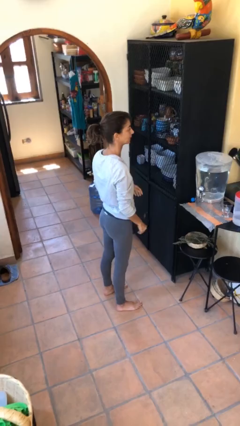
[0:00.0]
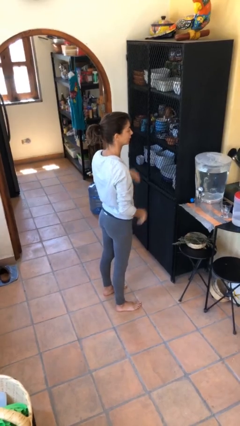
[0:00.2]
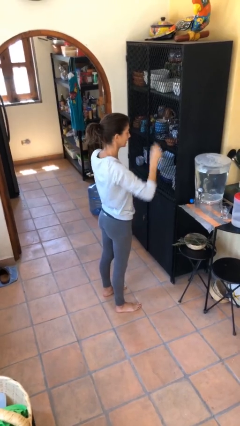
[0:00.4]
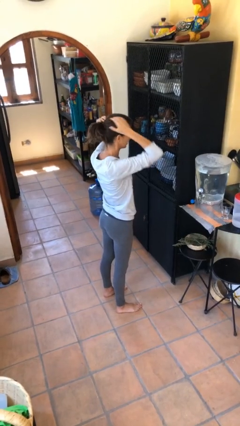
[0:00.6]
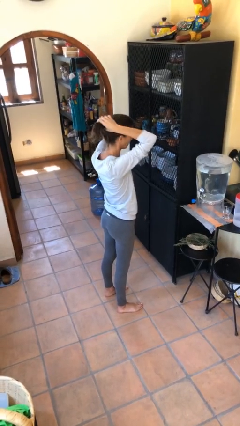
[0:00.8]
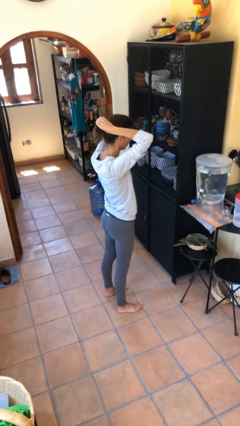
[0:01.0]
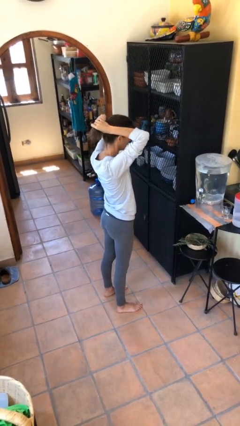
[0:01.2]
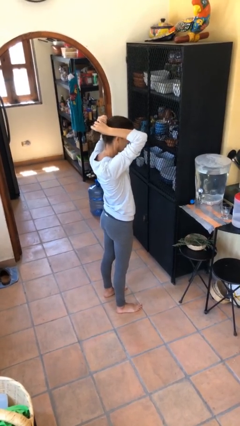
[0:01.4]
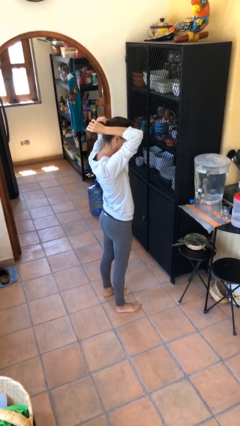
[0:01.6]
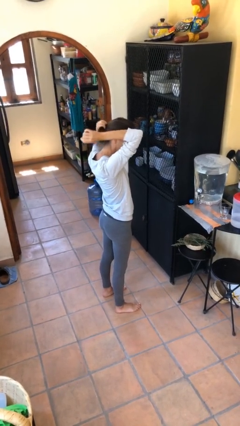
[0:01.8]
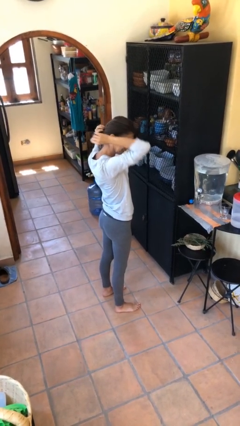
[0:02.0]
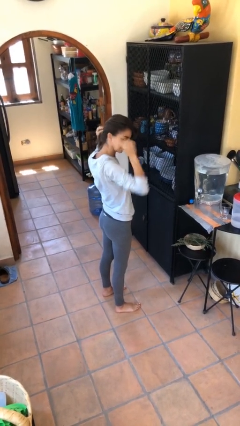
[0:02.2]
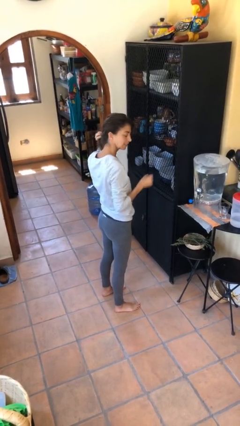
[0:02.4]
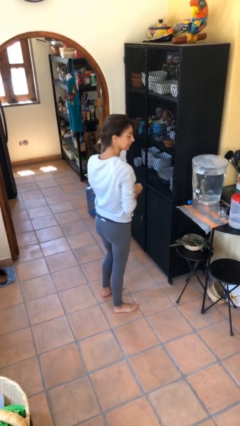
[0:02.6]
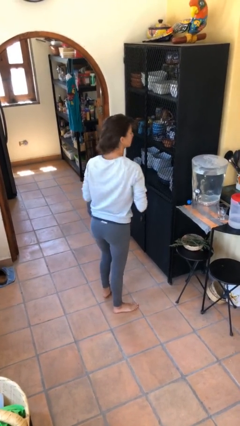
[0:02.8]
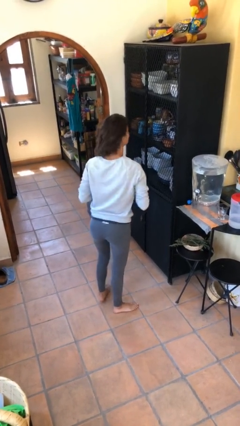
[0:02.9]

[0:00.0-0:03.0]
person takes off hairtie

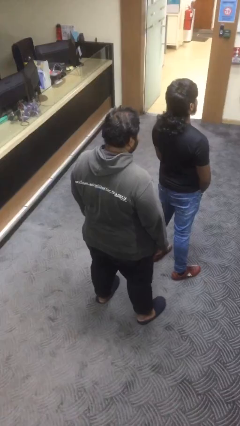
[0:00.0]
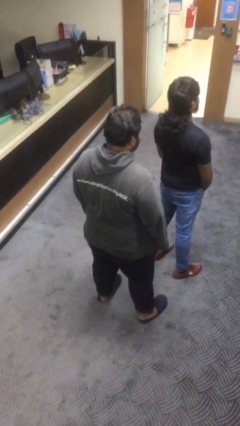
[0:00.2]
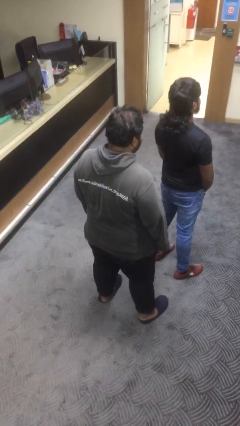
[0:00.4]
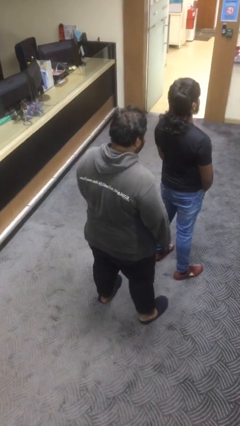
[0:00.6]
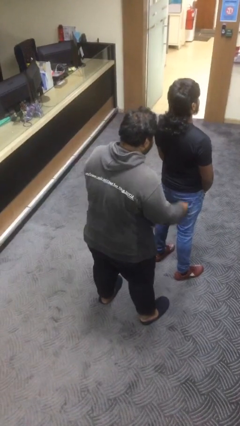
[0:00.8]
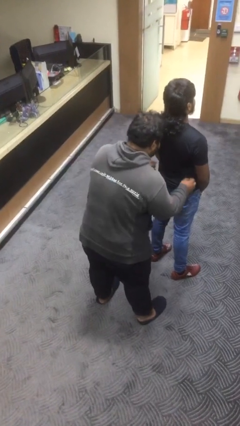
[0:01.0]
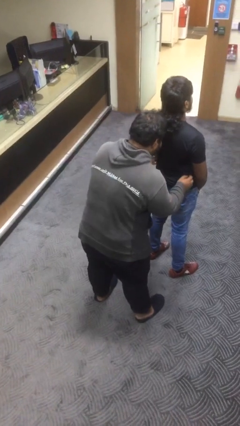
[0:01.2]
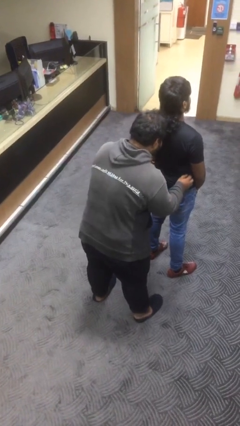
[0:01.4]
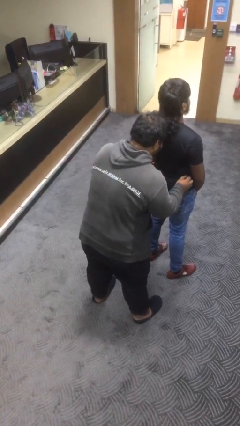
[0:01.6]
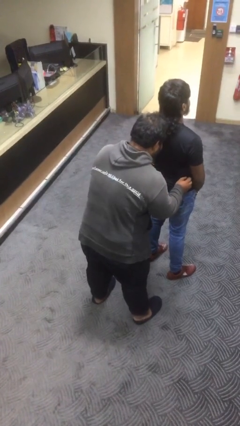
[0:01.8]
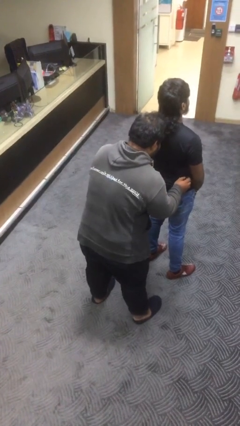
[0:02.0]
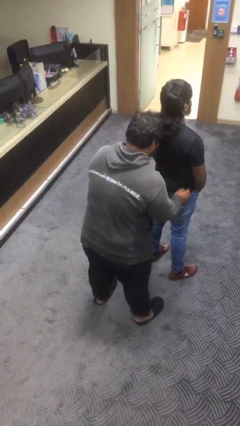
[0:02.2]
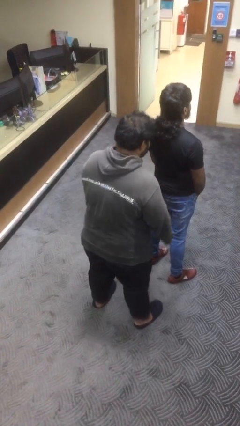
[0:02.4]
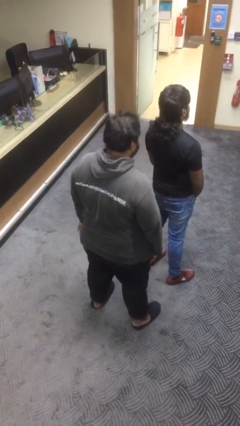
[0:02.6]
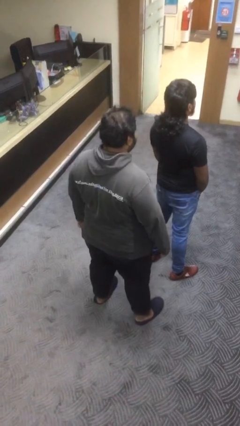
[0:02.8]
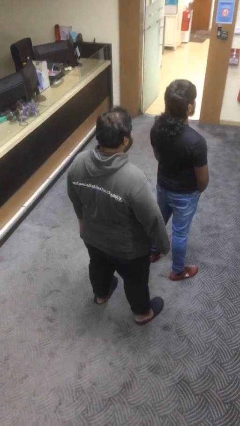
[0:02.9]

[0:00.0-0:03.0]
person tickles person

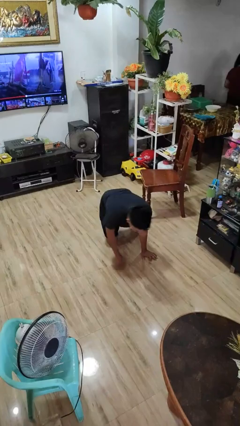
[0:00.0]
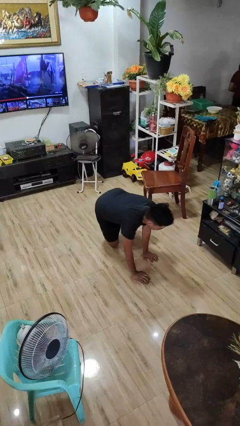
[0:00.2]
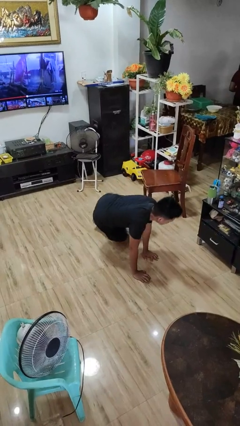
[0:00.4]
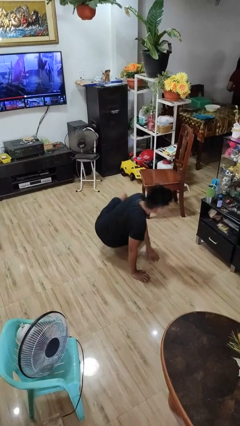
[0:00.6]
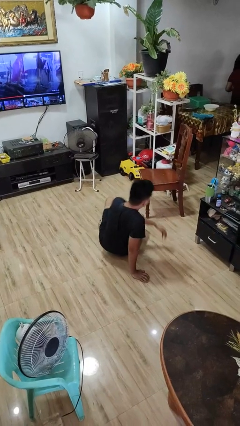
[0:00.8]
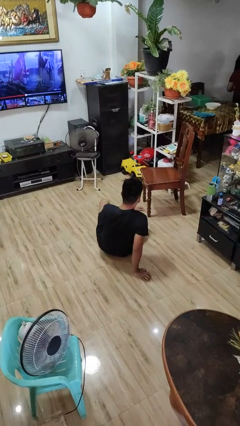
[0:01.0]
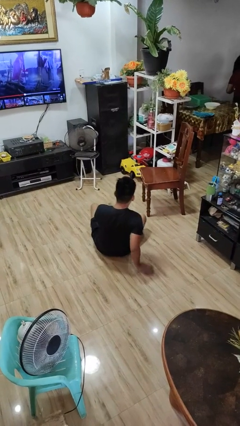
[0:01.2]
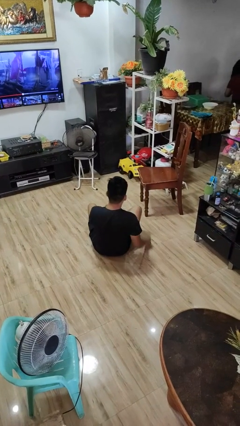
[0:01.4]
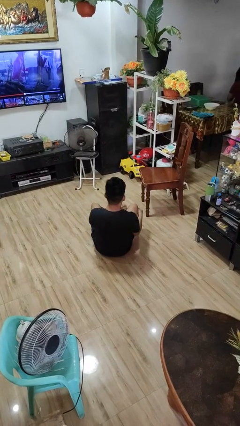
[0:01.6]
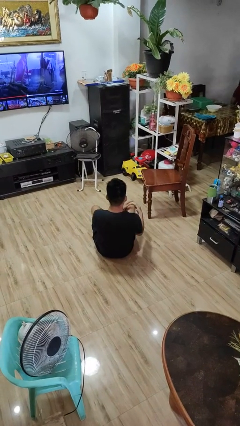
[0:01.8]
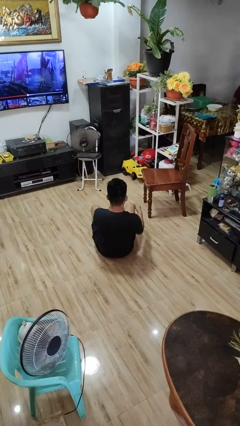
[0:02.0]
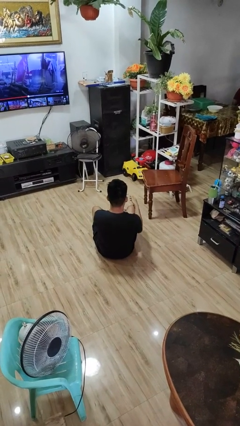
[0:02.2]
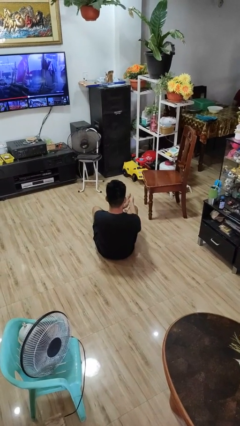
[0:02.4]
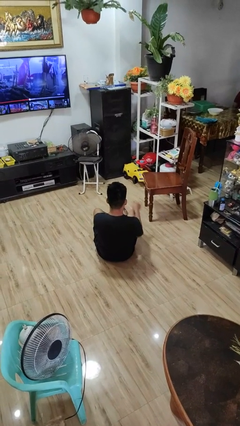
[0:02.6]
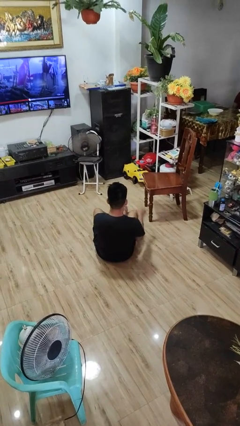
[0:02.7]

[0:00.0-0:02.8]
person lies down on floor

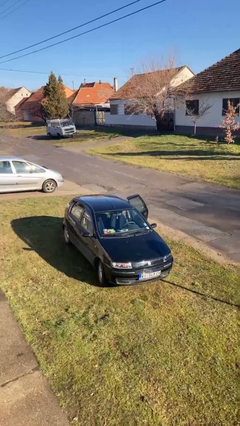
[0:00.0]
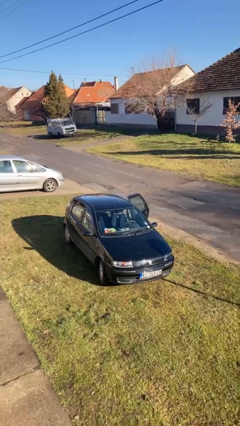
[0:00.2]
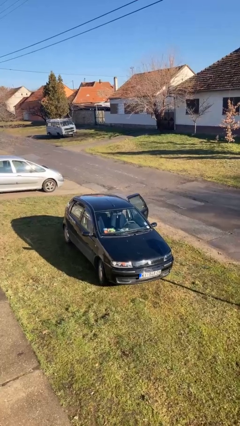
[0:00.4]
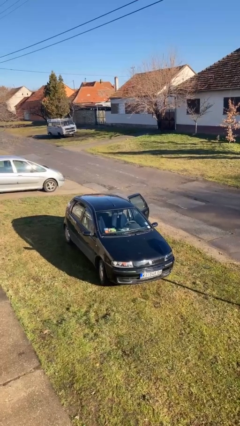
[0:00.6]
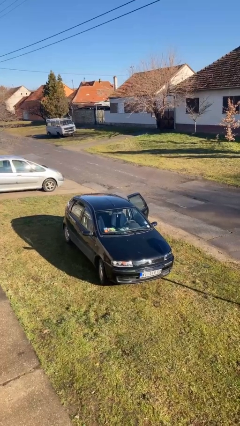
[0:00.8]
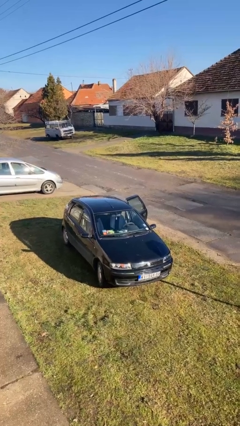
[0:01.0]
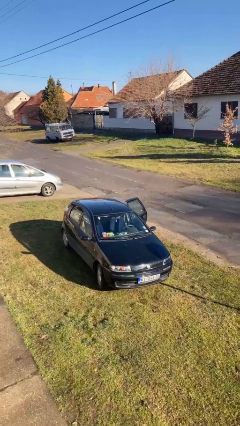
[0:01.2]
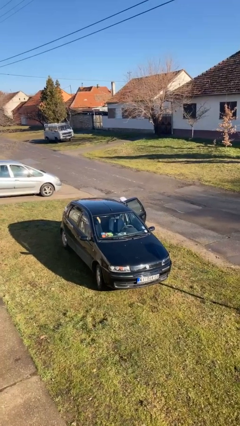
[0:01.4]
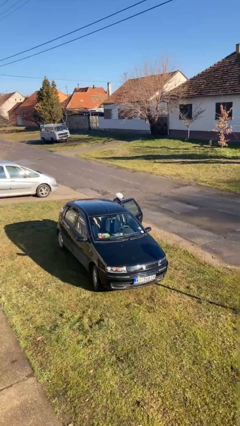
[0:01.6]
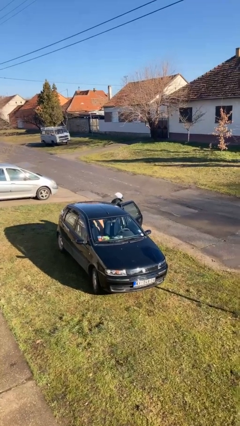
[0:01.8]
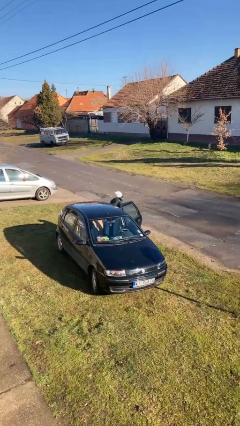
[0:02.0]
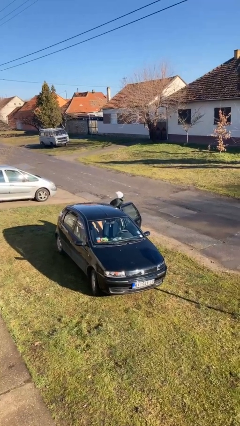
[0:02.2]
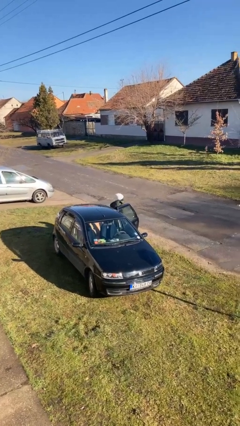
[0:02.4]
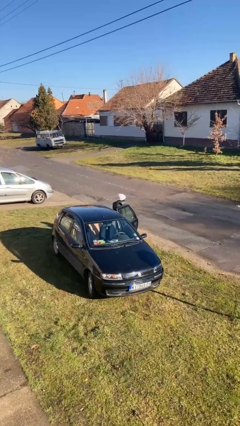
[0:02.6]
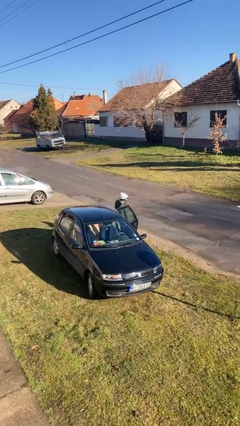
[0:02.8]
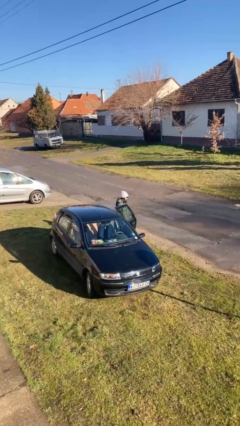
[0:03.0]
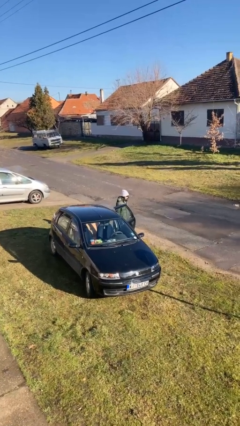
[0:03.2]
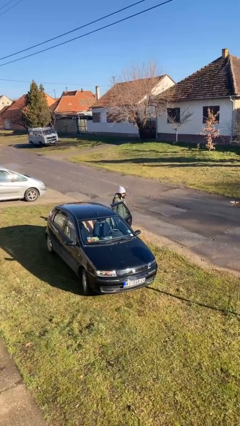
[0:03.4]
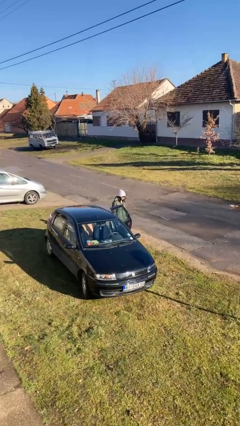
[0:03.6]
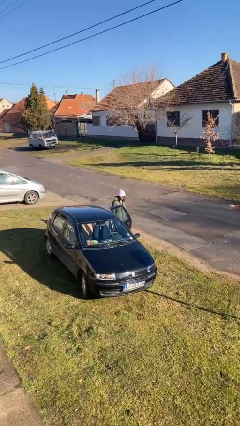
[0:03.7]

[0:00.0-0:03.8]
person exits car

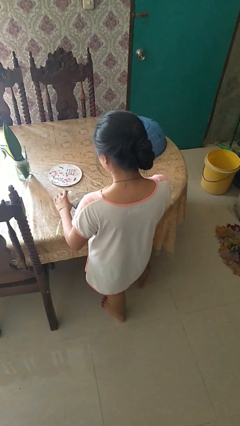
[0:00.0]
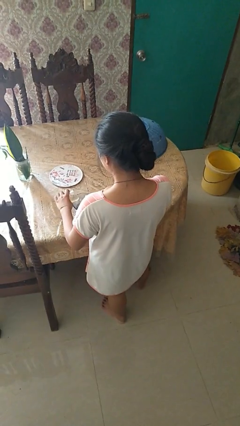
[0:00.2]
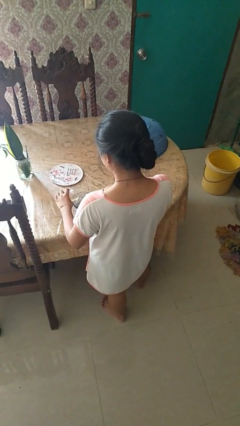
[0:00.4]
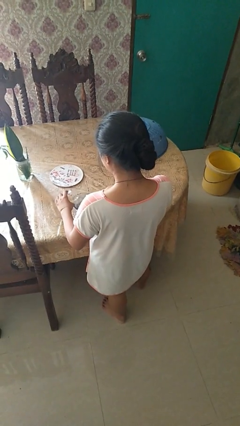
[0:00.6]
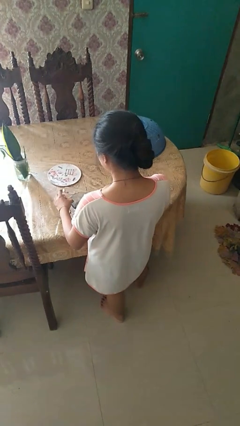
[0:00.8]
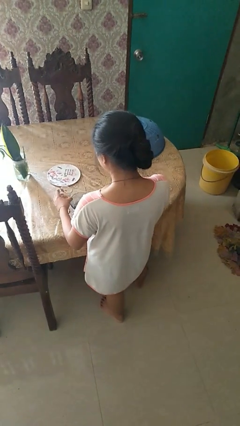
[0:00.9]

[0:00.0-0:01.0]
person pours into bowl

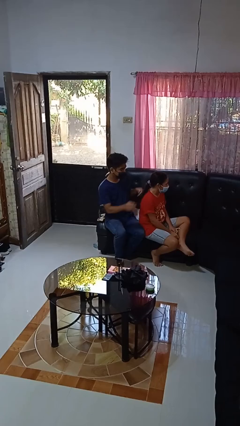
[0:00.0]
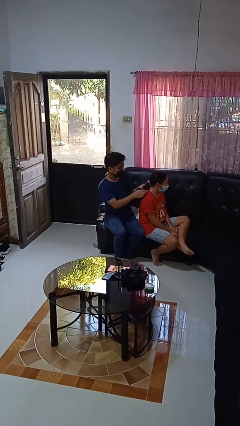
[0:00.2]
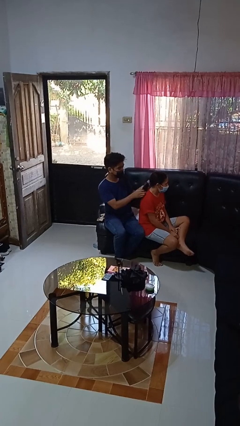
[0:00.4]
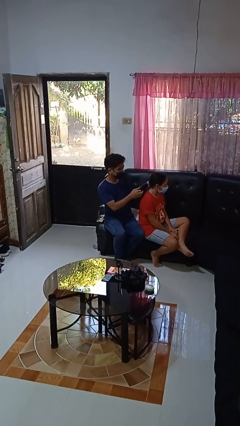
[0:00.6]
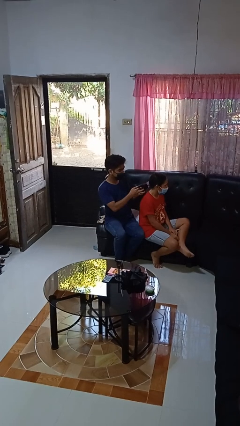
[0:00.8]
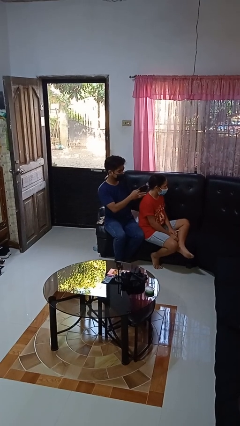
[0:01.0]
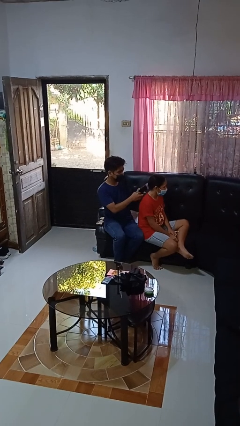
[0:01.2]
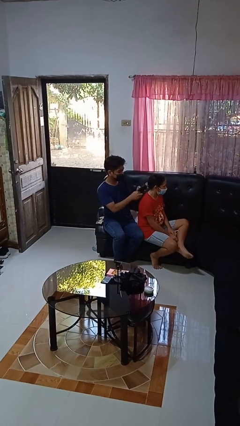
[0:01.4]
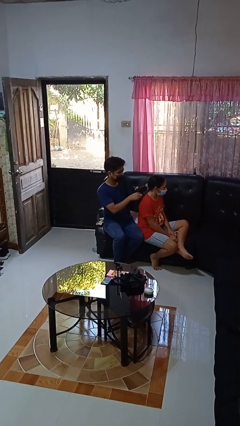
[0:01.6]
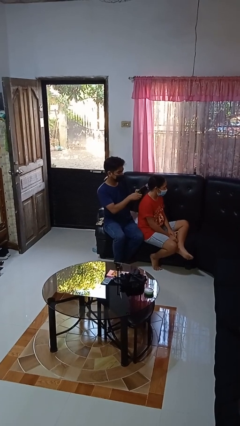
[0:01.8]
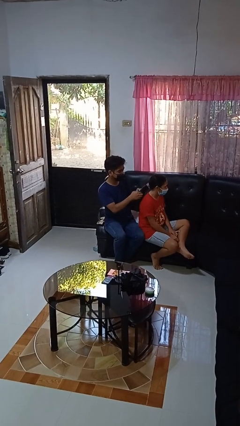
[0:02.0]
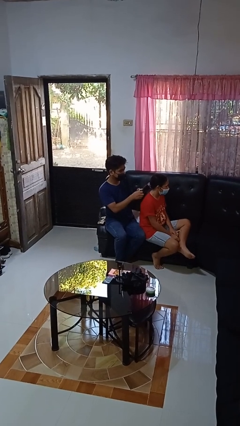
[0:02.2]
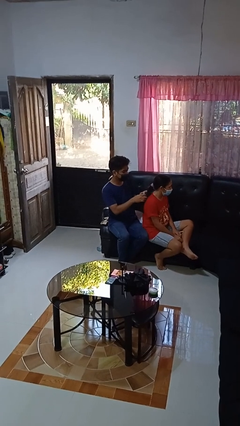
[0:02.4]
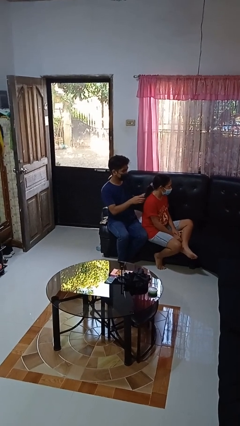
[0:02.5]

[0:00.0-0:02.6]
person braids hair of person

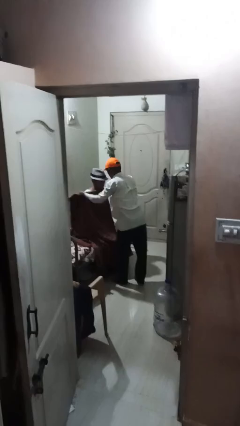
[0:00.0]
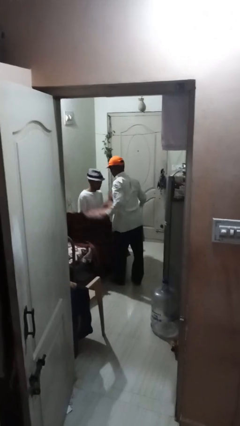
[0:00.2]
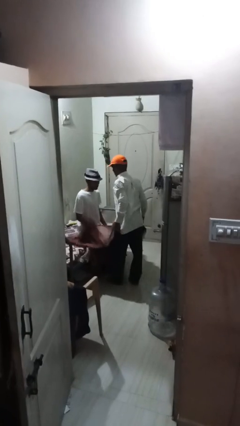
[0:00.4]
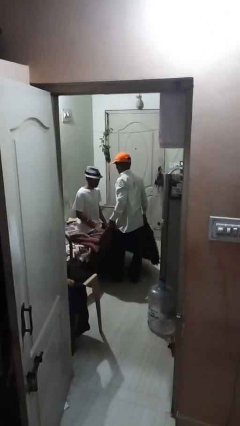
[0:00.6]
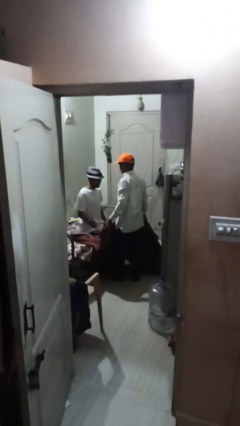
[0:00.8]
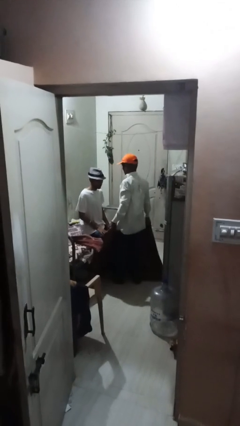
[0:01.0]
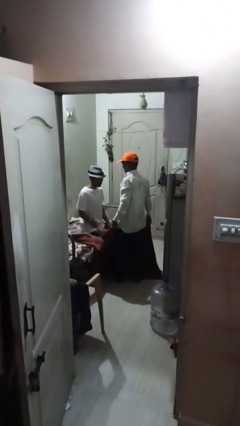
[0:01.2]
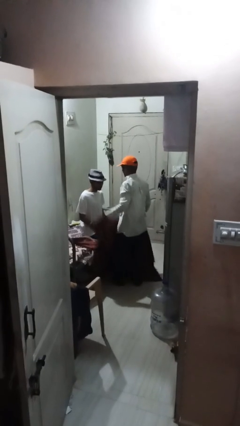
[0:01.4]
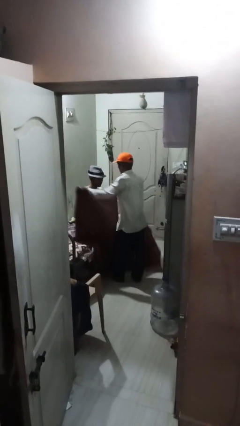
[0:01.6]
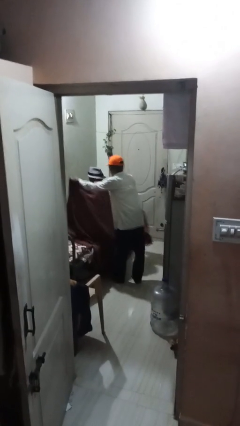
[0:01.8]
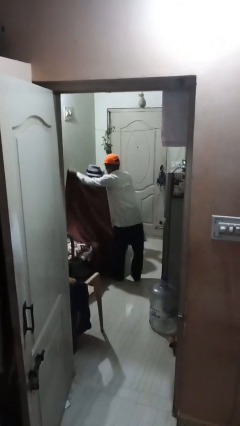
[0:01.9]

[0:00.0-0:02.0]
person uncovers friend with blanket
